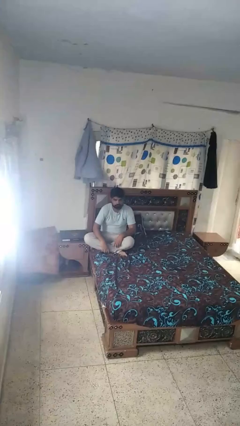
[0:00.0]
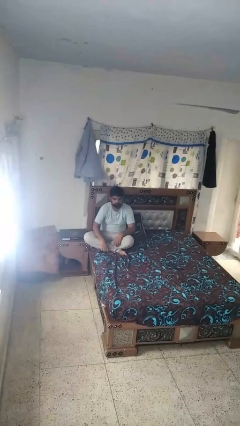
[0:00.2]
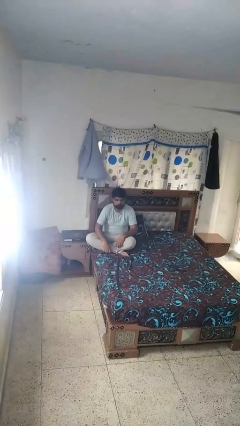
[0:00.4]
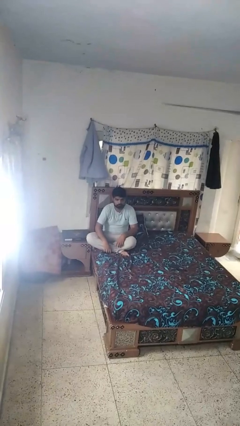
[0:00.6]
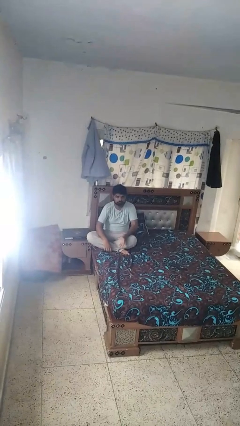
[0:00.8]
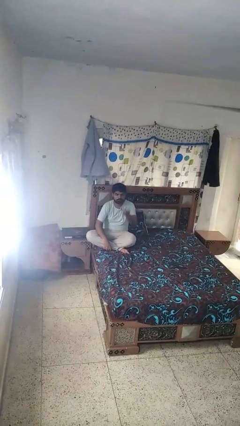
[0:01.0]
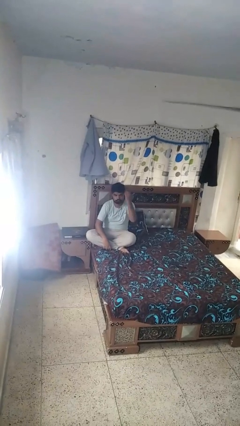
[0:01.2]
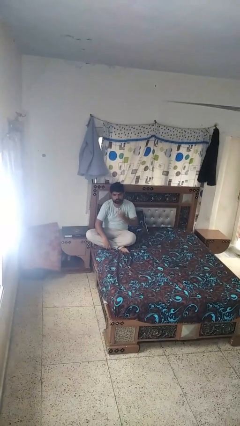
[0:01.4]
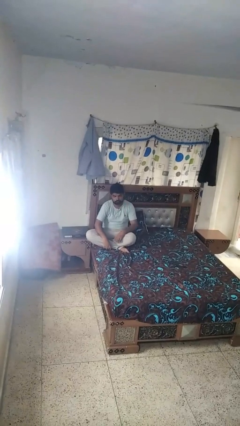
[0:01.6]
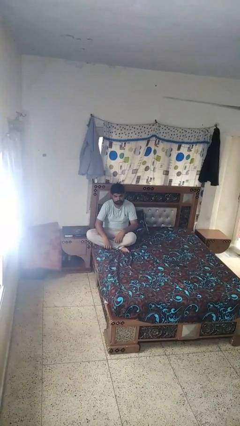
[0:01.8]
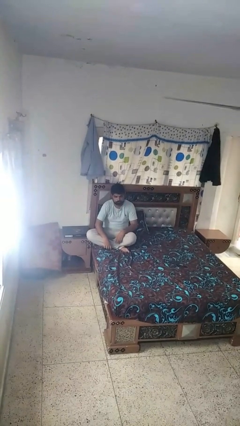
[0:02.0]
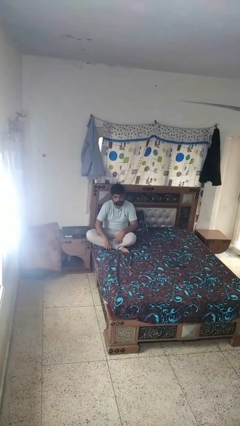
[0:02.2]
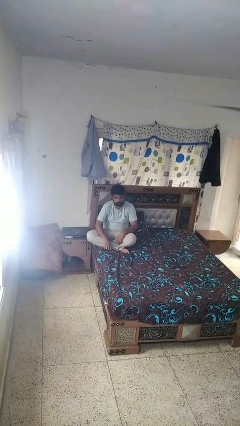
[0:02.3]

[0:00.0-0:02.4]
person gestures swipe up

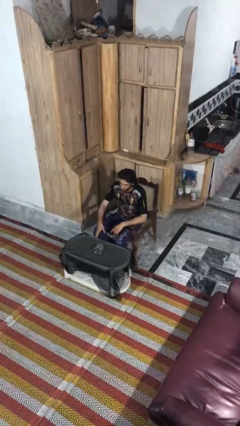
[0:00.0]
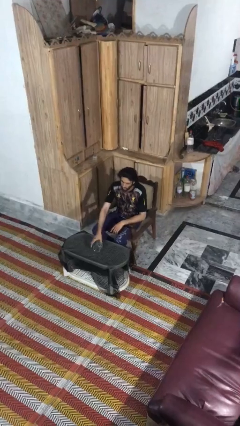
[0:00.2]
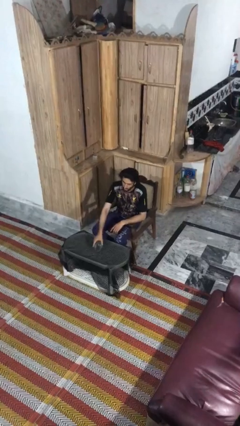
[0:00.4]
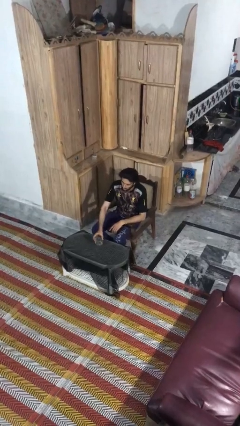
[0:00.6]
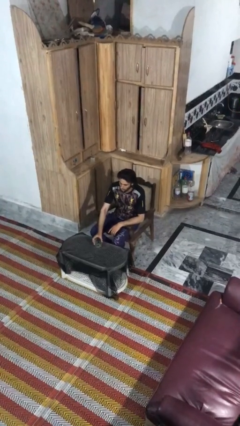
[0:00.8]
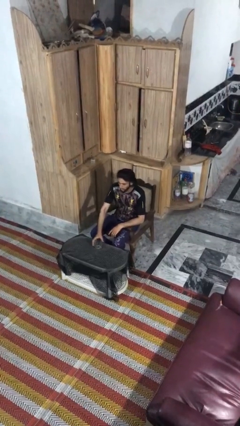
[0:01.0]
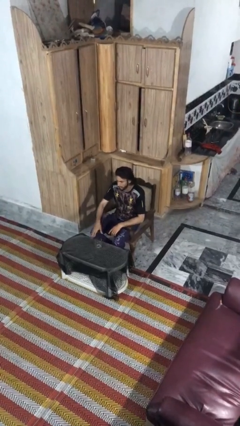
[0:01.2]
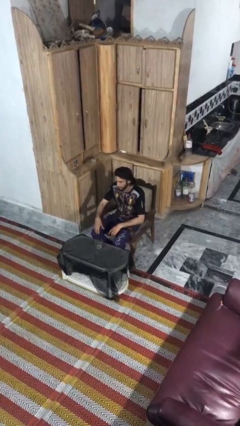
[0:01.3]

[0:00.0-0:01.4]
person sets upright glass

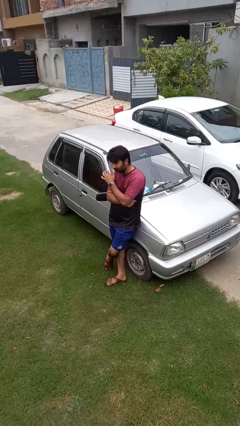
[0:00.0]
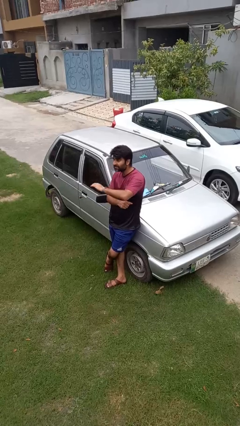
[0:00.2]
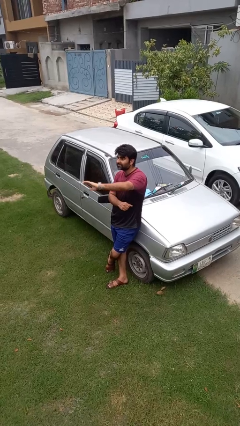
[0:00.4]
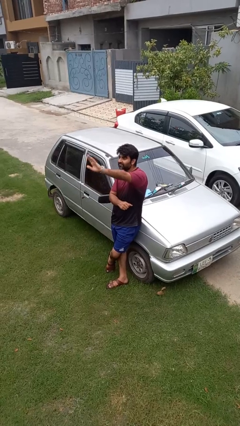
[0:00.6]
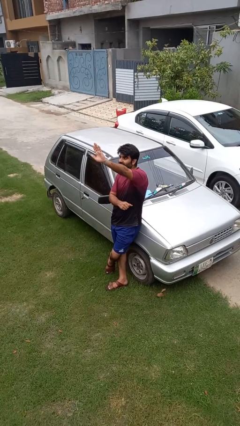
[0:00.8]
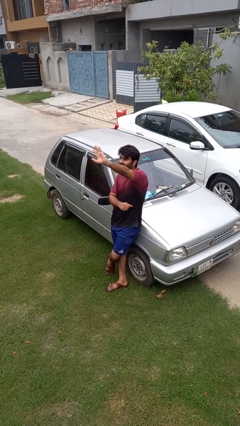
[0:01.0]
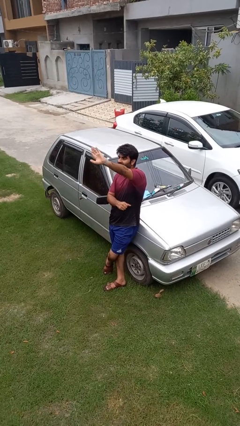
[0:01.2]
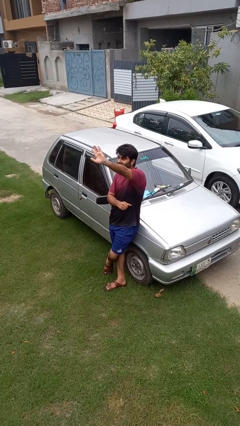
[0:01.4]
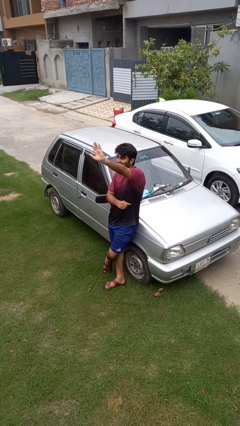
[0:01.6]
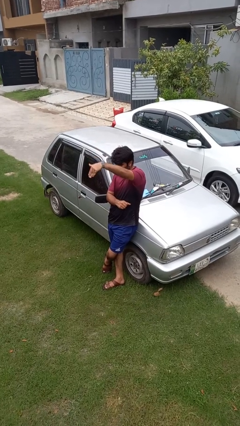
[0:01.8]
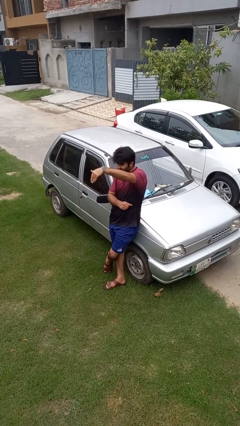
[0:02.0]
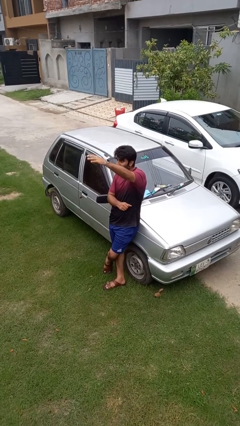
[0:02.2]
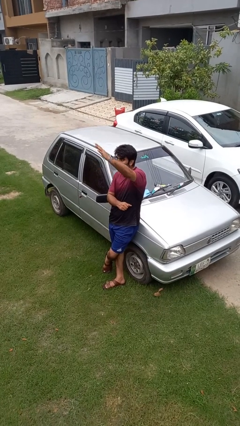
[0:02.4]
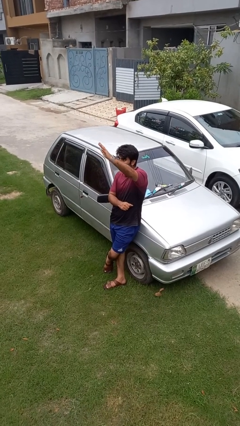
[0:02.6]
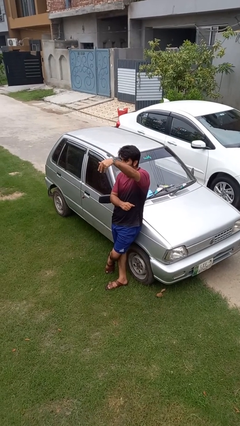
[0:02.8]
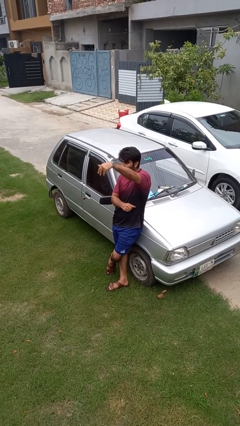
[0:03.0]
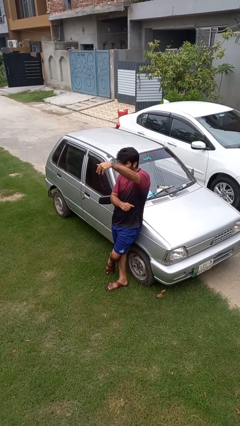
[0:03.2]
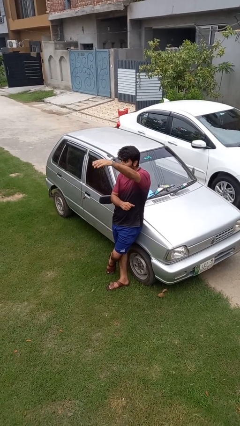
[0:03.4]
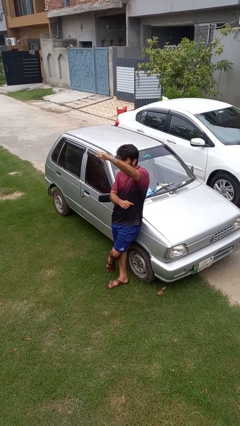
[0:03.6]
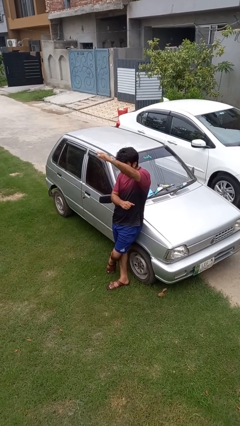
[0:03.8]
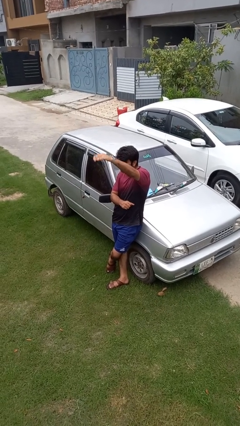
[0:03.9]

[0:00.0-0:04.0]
person gestures come here

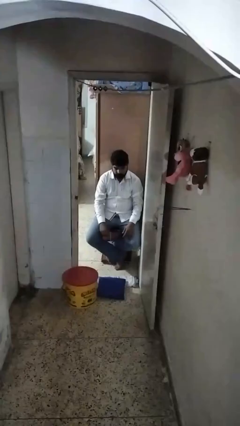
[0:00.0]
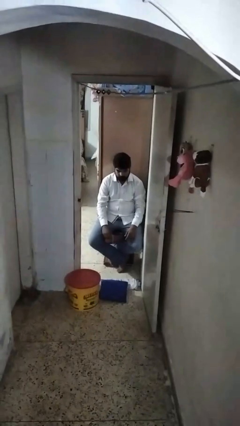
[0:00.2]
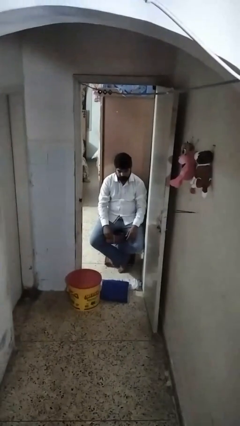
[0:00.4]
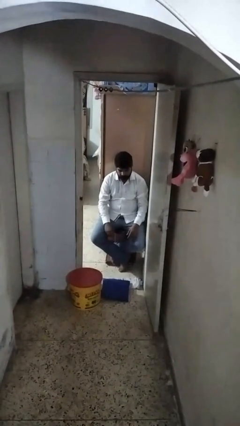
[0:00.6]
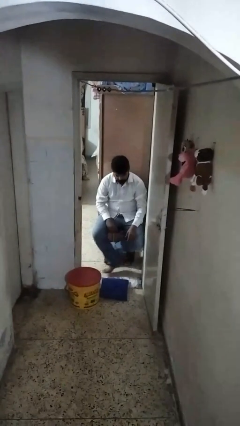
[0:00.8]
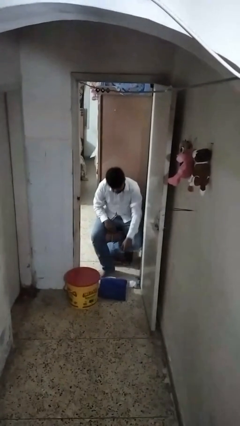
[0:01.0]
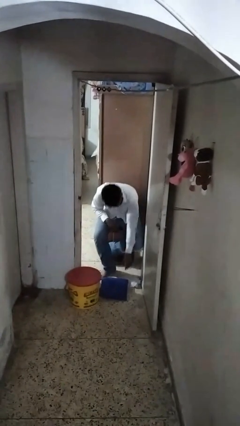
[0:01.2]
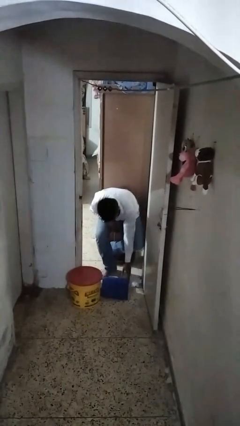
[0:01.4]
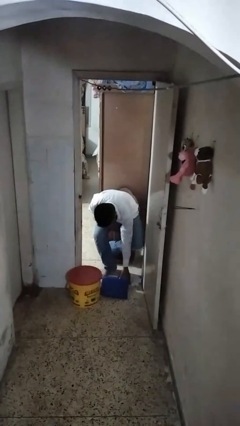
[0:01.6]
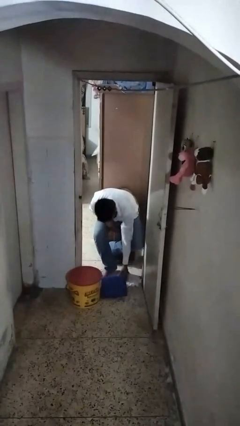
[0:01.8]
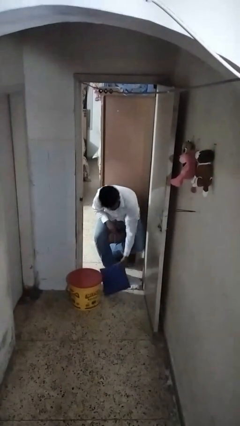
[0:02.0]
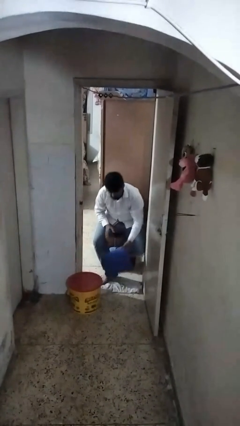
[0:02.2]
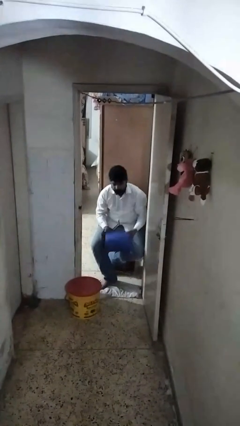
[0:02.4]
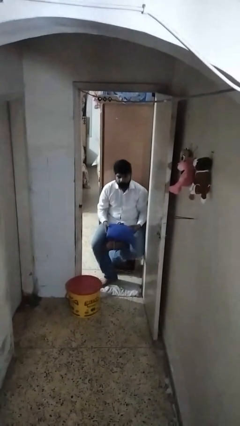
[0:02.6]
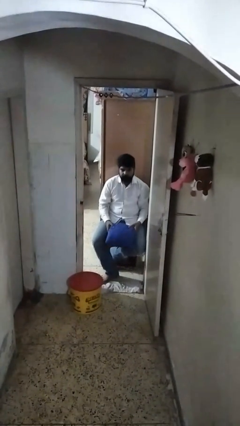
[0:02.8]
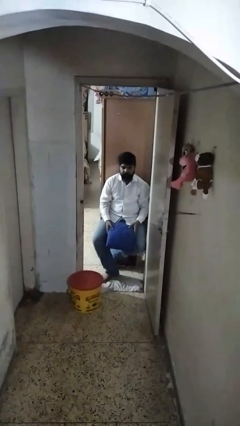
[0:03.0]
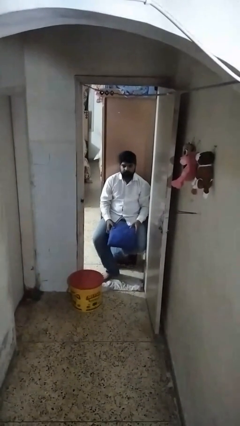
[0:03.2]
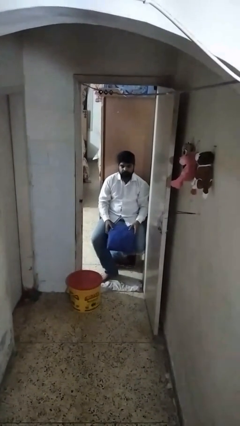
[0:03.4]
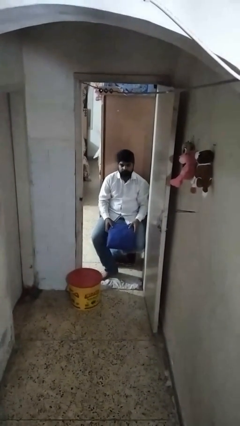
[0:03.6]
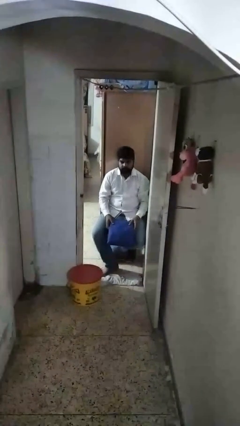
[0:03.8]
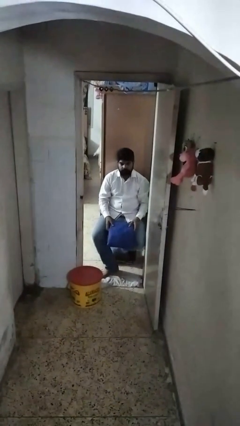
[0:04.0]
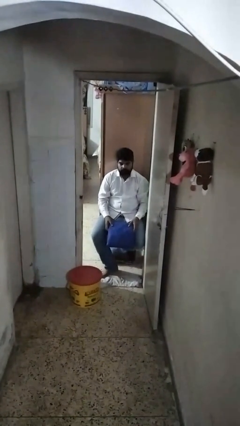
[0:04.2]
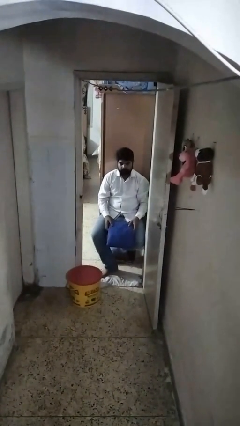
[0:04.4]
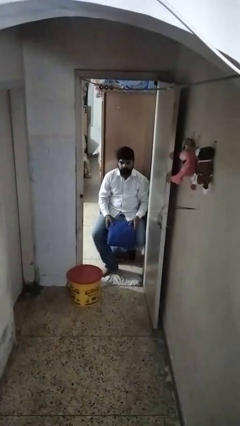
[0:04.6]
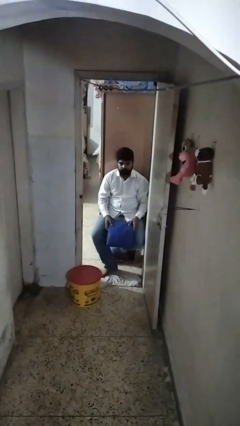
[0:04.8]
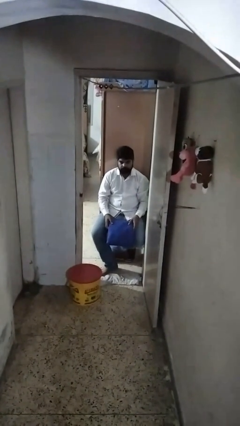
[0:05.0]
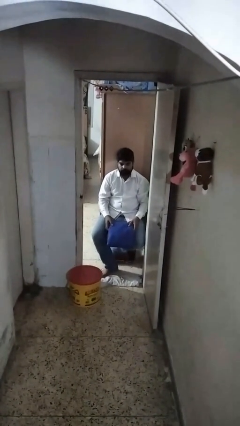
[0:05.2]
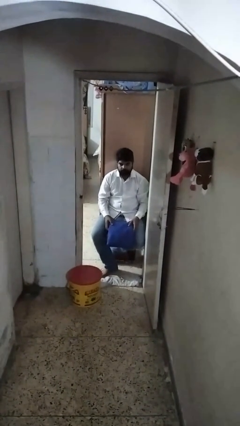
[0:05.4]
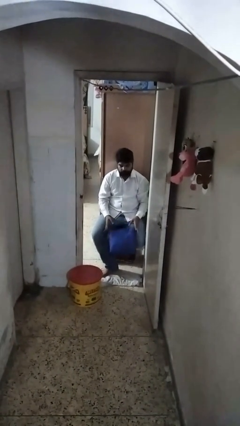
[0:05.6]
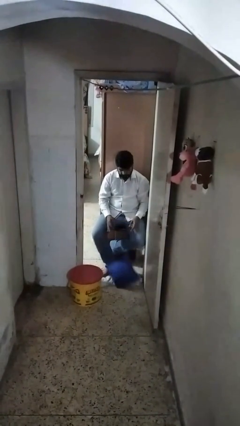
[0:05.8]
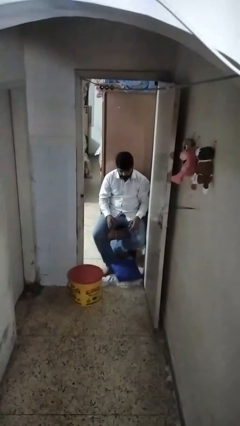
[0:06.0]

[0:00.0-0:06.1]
person picks up object from floor

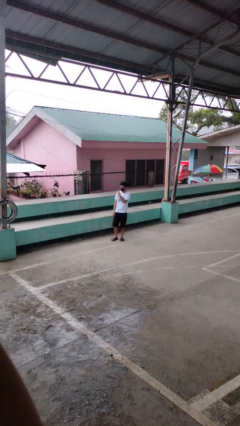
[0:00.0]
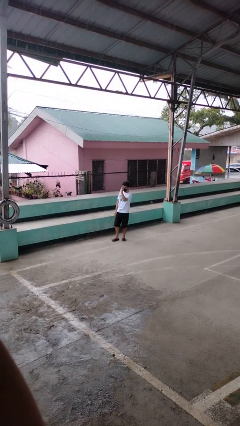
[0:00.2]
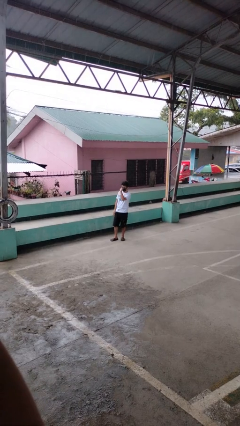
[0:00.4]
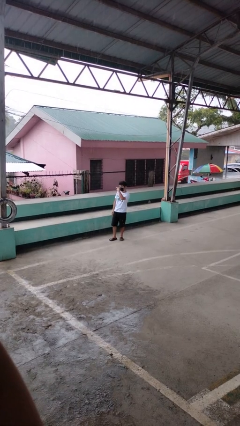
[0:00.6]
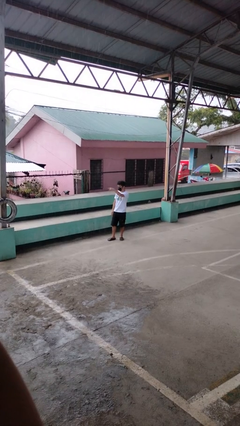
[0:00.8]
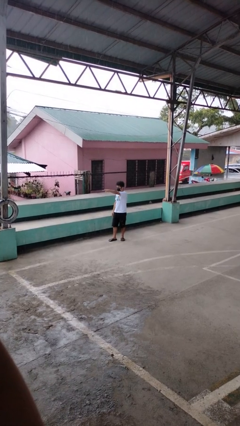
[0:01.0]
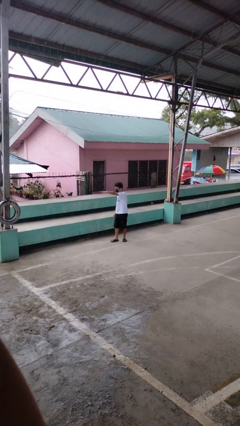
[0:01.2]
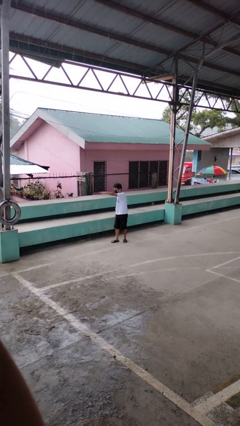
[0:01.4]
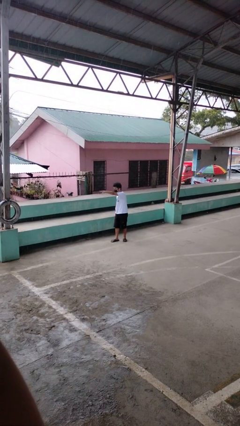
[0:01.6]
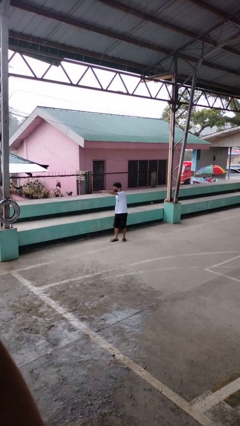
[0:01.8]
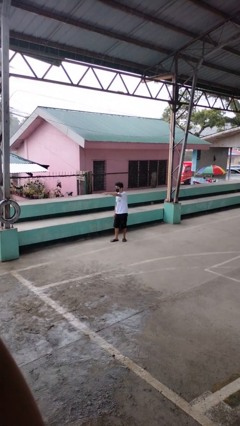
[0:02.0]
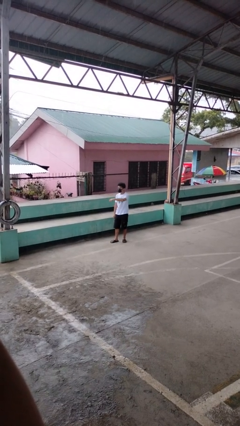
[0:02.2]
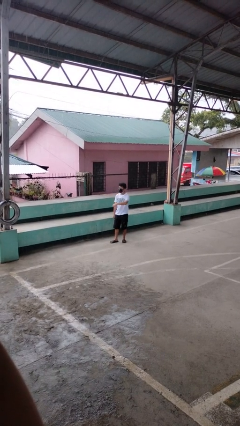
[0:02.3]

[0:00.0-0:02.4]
person gestures watch closely

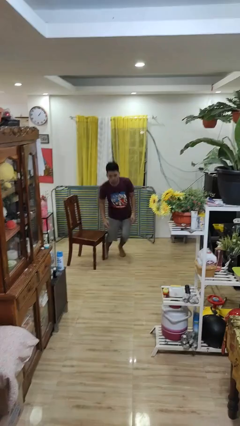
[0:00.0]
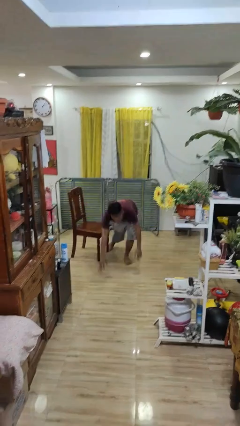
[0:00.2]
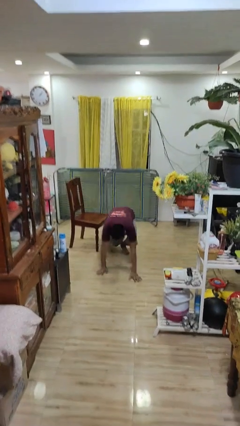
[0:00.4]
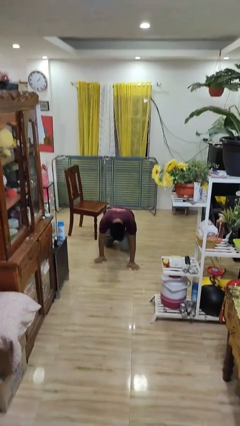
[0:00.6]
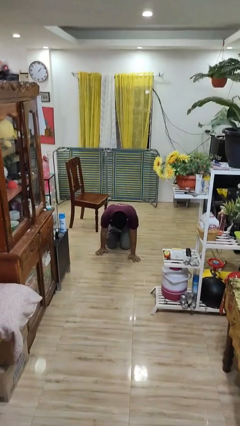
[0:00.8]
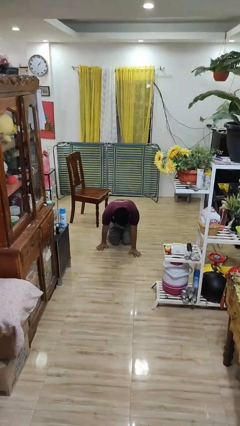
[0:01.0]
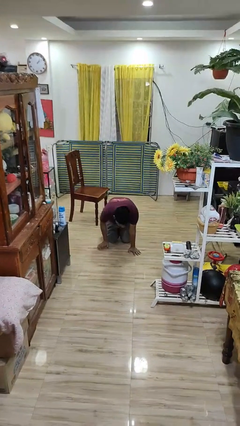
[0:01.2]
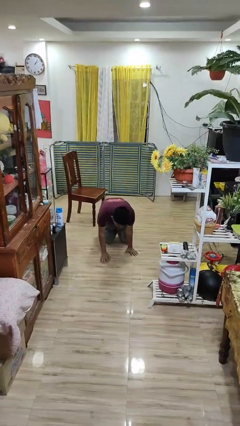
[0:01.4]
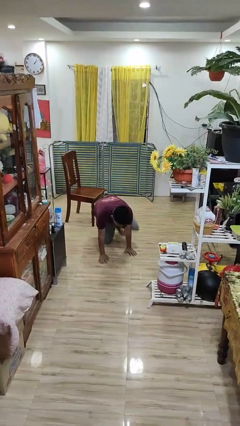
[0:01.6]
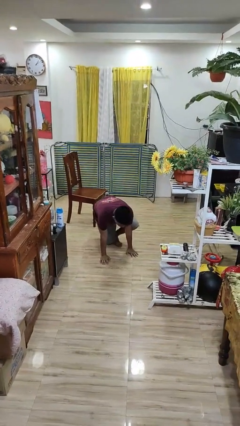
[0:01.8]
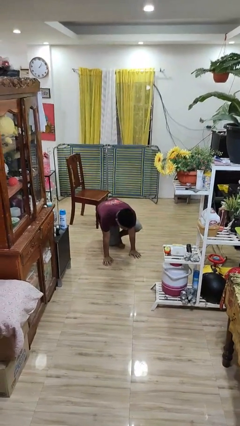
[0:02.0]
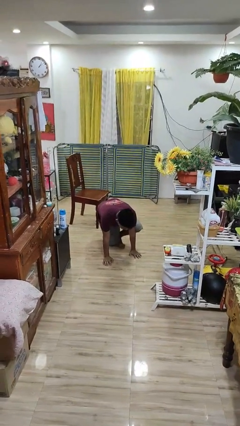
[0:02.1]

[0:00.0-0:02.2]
person trips on object on floor
